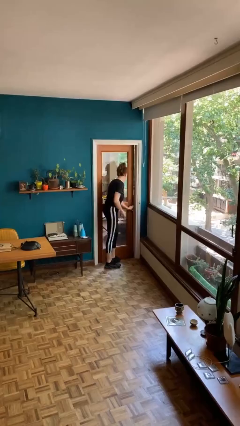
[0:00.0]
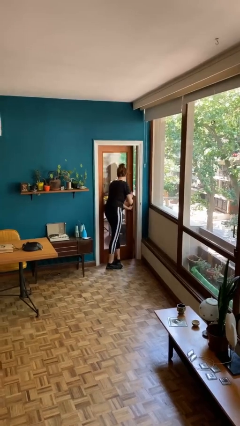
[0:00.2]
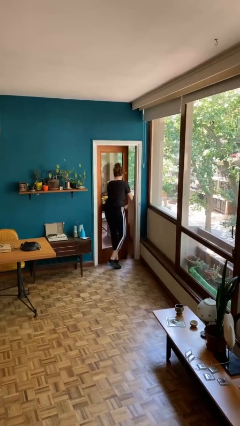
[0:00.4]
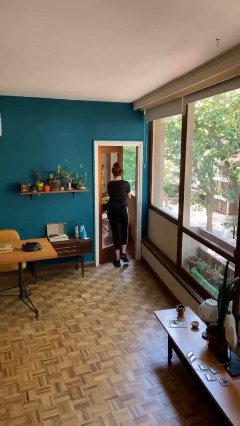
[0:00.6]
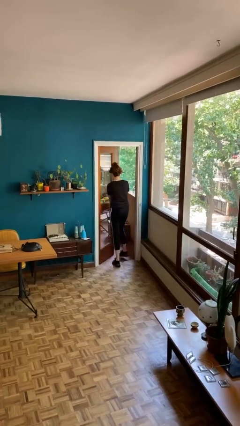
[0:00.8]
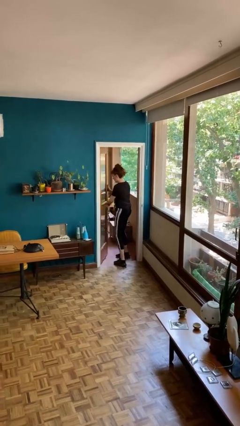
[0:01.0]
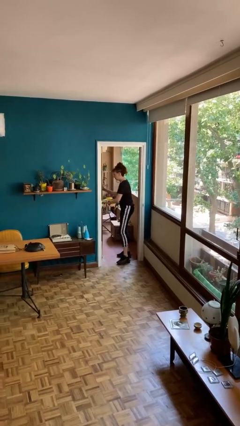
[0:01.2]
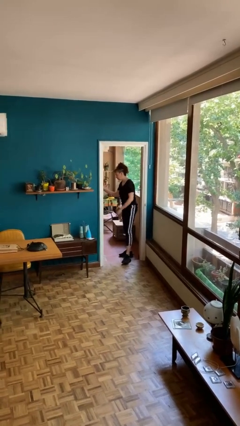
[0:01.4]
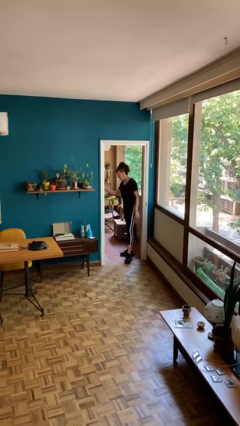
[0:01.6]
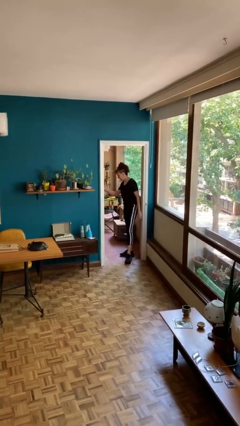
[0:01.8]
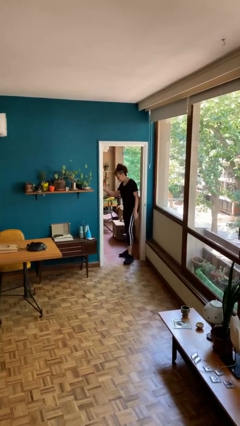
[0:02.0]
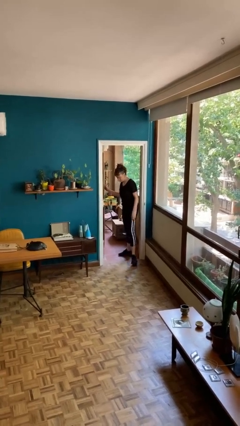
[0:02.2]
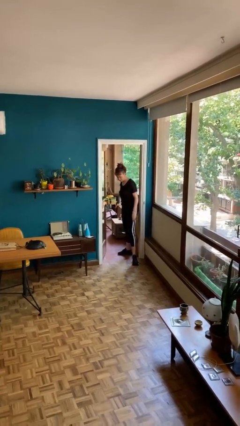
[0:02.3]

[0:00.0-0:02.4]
person opens facility door

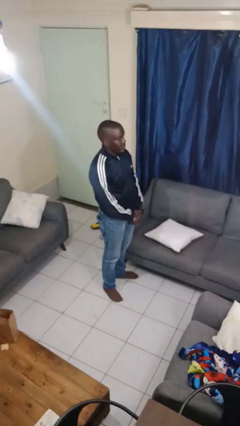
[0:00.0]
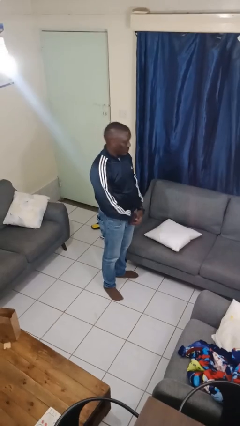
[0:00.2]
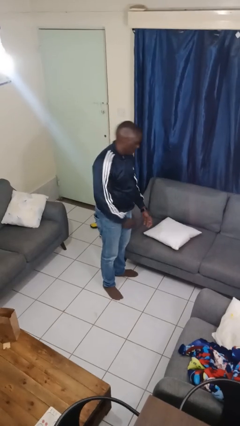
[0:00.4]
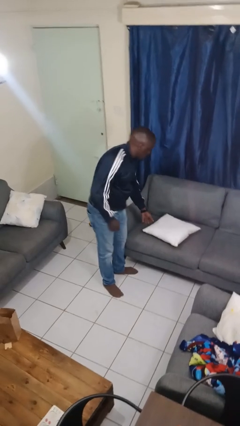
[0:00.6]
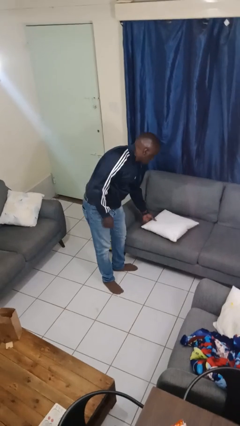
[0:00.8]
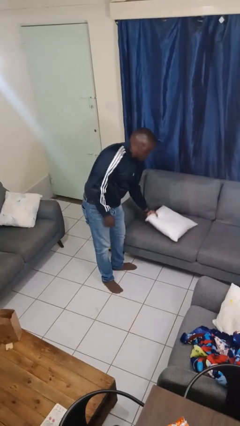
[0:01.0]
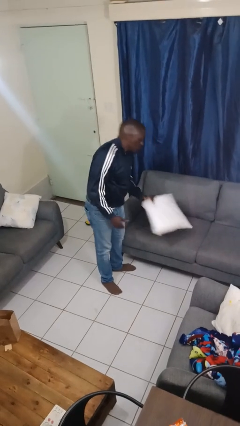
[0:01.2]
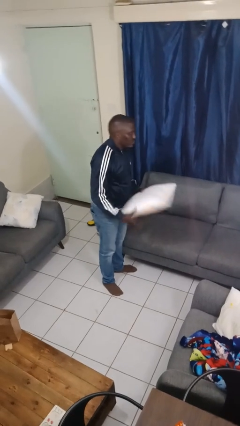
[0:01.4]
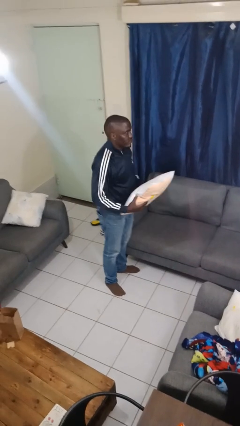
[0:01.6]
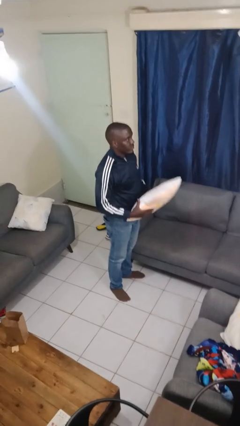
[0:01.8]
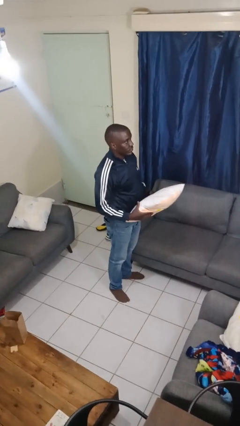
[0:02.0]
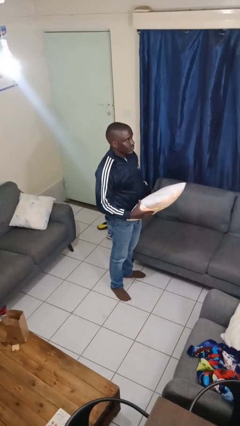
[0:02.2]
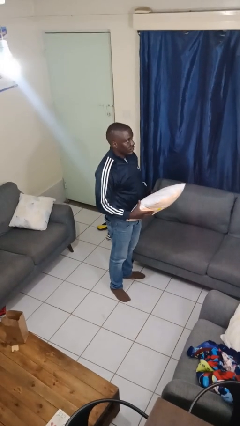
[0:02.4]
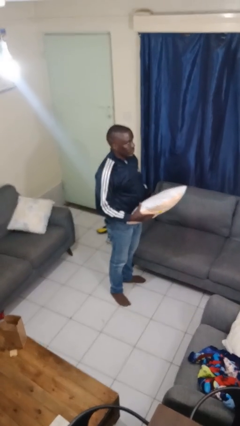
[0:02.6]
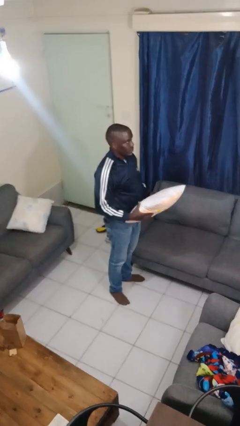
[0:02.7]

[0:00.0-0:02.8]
person picks up object from couch

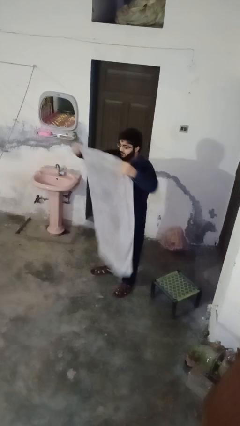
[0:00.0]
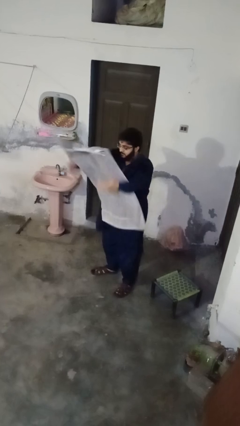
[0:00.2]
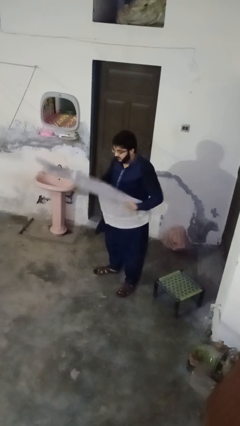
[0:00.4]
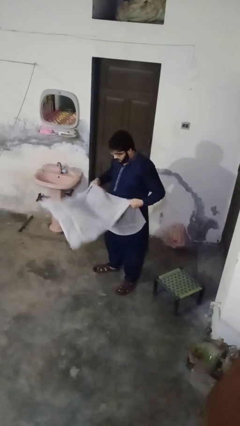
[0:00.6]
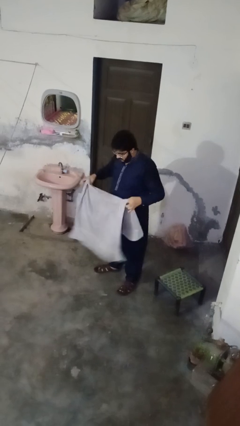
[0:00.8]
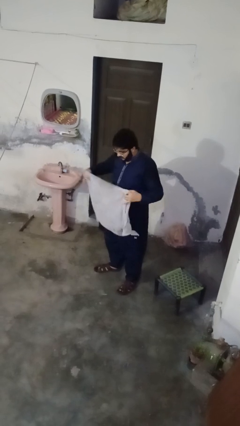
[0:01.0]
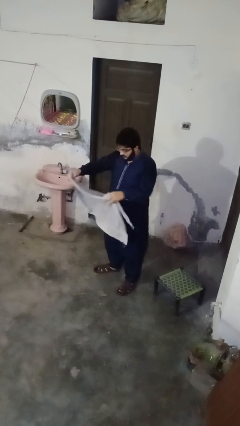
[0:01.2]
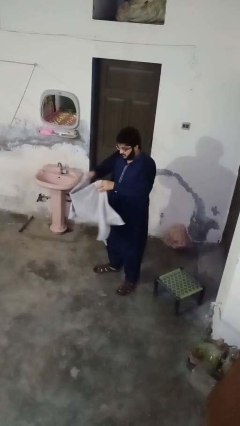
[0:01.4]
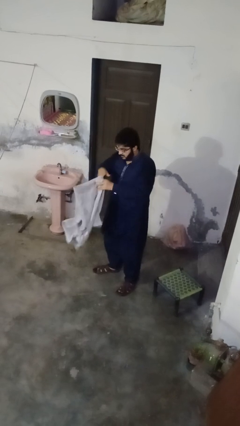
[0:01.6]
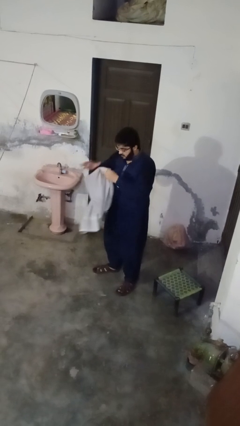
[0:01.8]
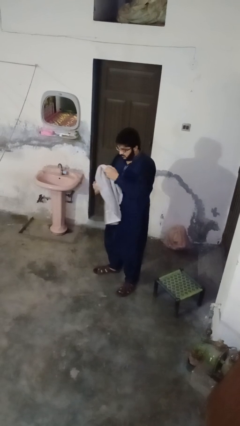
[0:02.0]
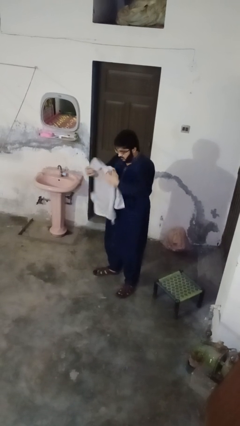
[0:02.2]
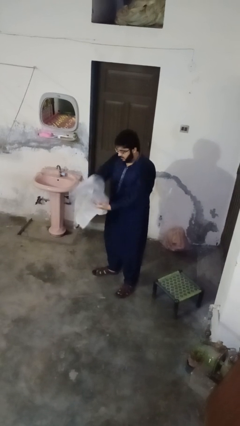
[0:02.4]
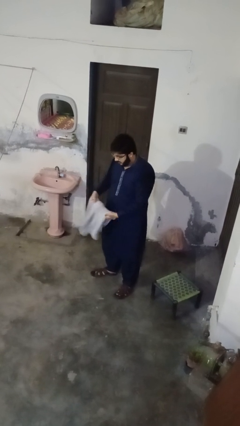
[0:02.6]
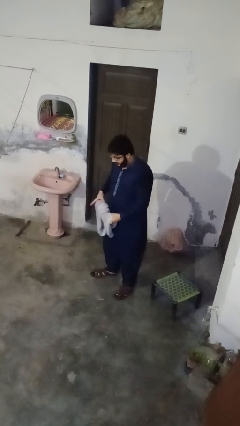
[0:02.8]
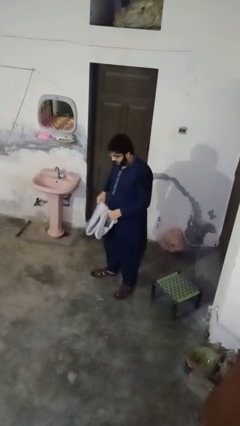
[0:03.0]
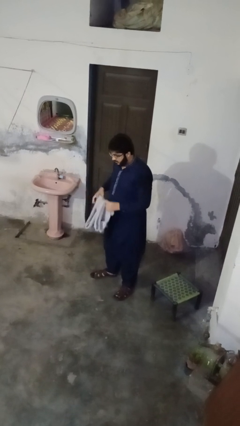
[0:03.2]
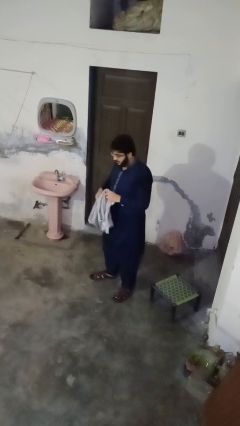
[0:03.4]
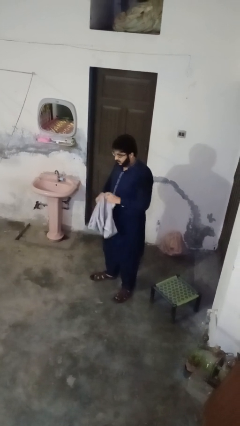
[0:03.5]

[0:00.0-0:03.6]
person folds towel

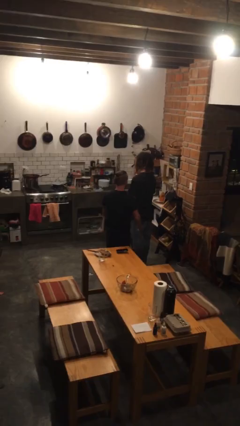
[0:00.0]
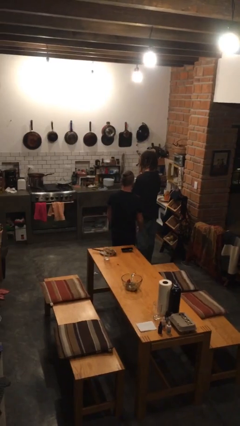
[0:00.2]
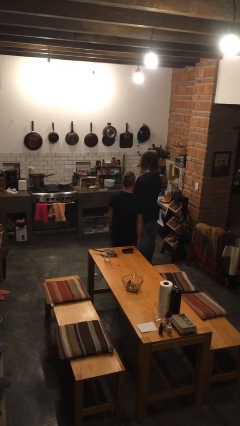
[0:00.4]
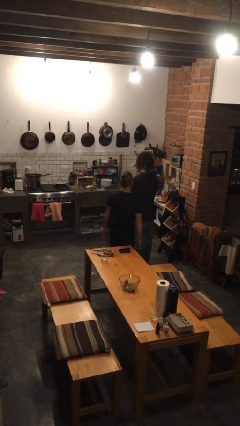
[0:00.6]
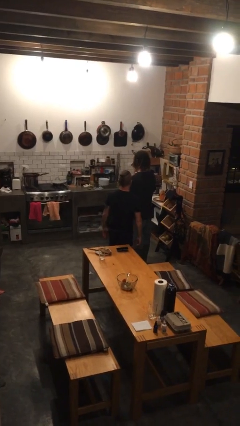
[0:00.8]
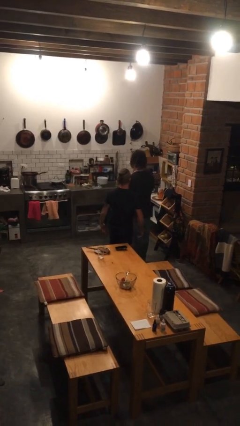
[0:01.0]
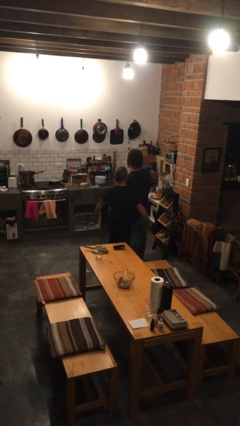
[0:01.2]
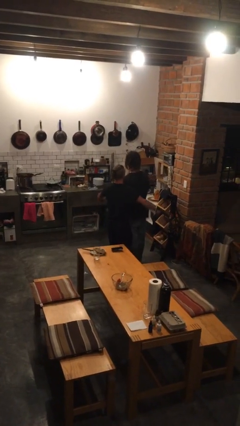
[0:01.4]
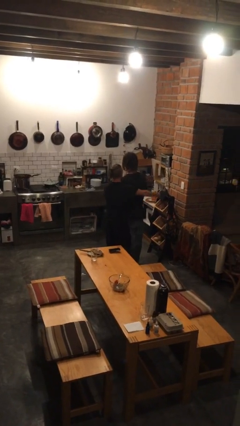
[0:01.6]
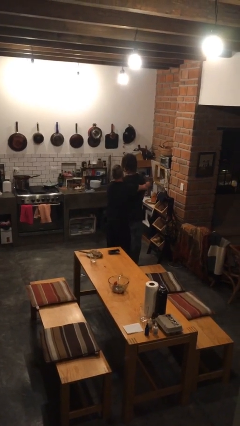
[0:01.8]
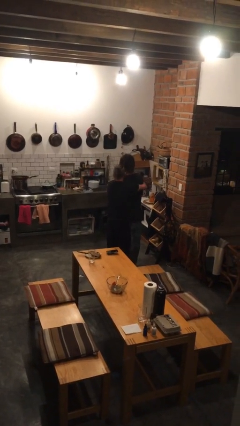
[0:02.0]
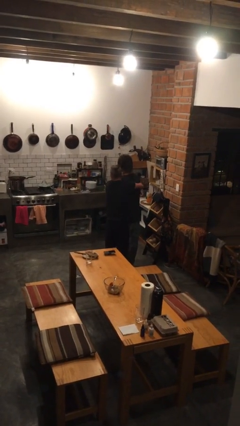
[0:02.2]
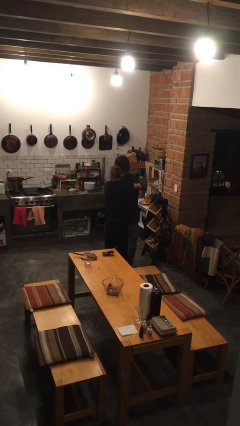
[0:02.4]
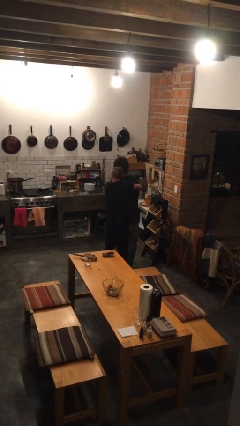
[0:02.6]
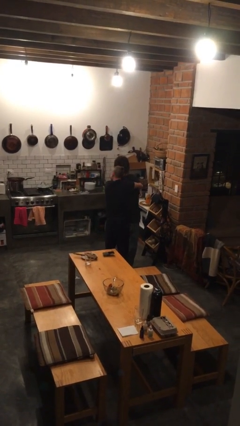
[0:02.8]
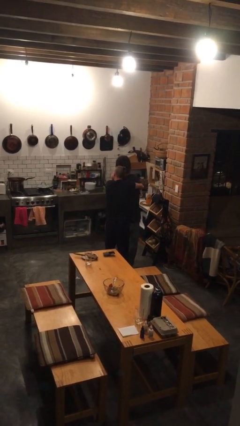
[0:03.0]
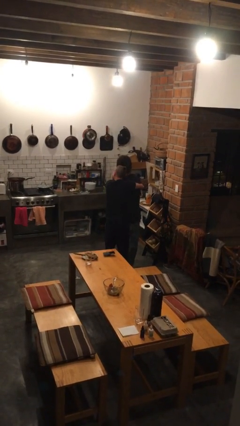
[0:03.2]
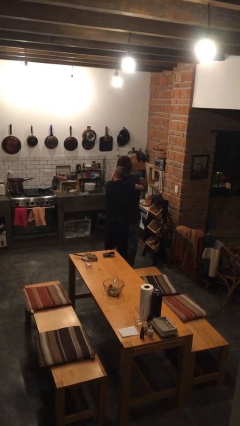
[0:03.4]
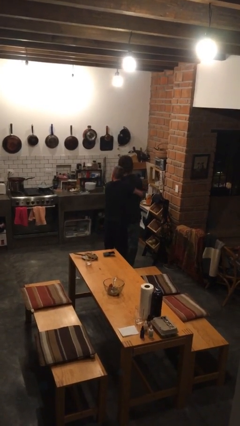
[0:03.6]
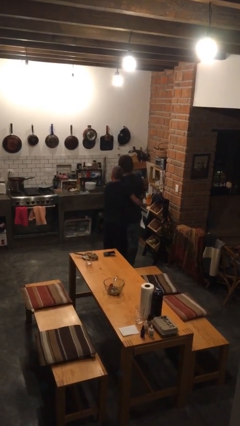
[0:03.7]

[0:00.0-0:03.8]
person hugs person from behind

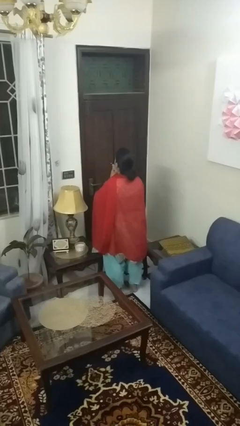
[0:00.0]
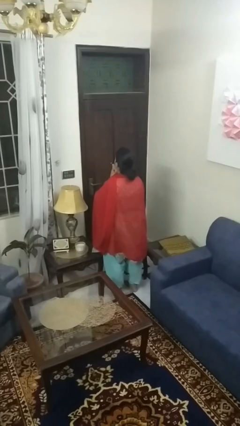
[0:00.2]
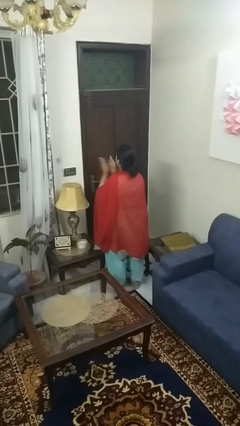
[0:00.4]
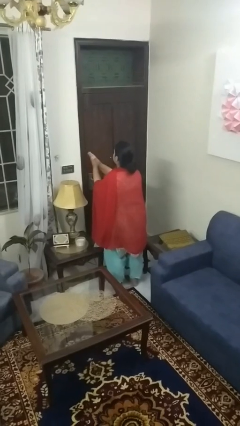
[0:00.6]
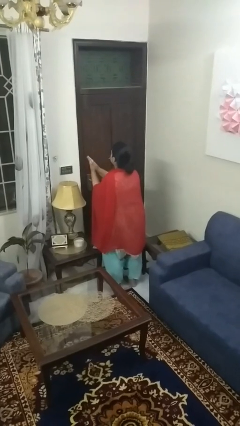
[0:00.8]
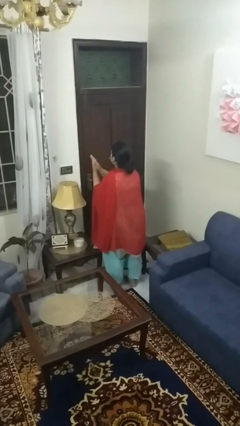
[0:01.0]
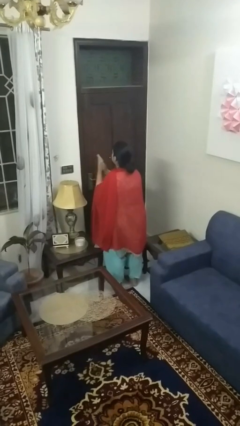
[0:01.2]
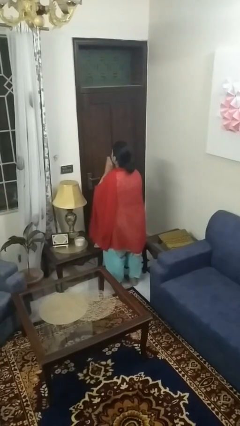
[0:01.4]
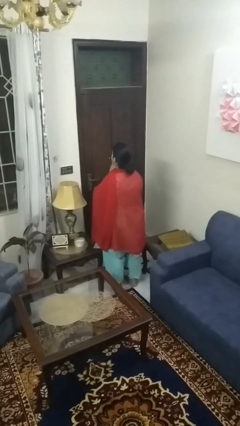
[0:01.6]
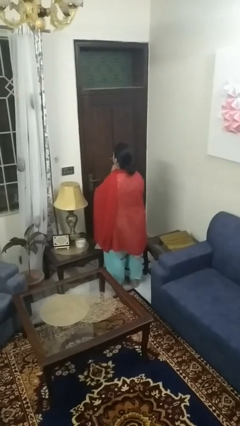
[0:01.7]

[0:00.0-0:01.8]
person swats bug

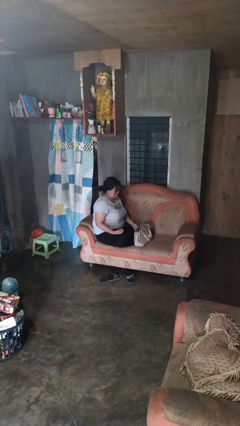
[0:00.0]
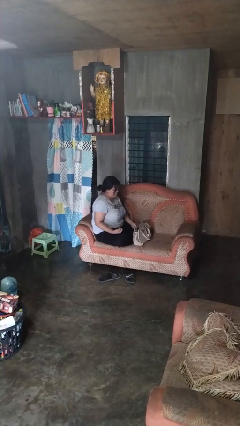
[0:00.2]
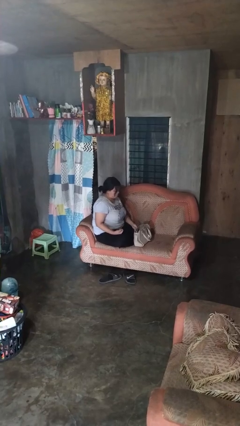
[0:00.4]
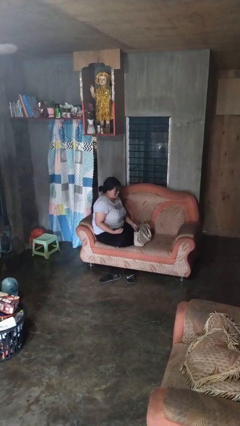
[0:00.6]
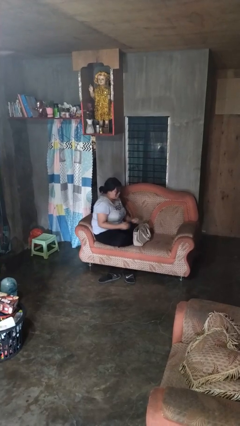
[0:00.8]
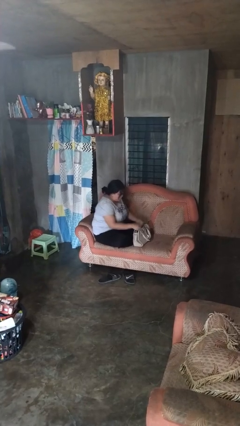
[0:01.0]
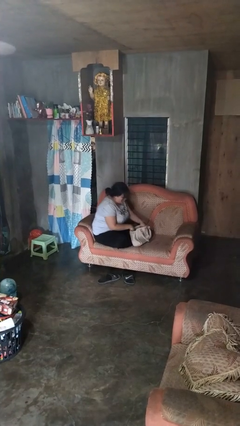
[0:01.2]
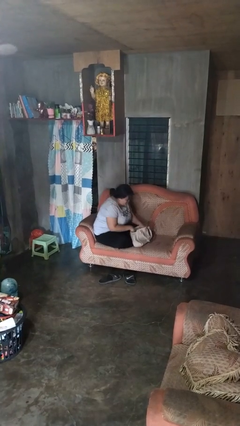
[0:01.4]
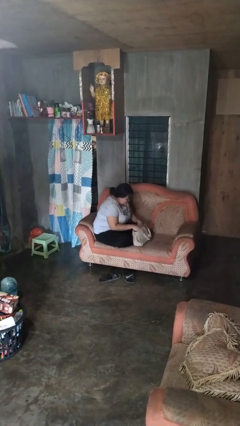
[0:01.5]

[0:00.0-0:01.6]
person searches in purse

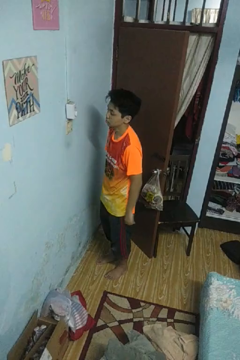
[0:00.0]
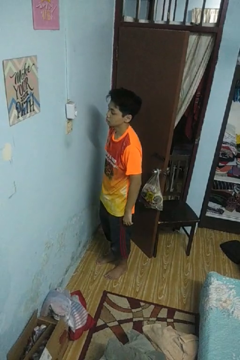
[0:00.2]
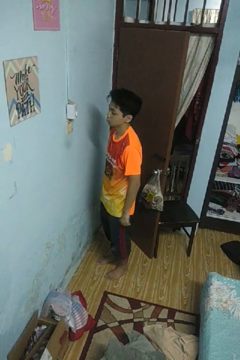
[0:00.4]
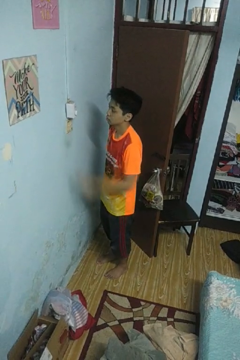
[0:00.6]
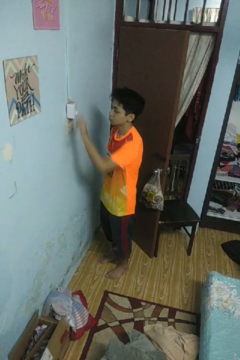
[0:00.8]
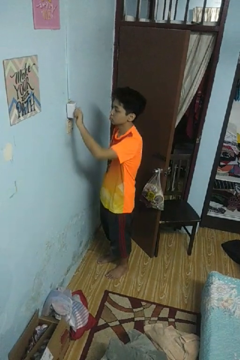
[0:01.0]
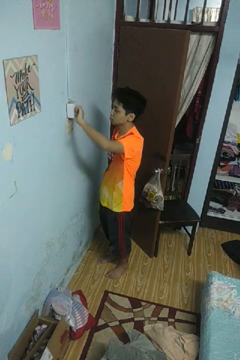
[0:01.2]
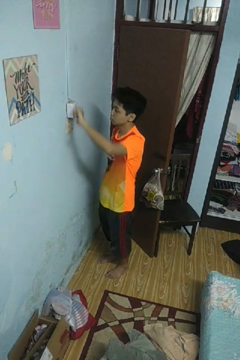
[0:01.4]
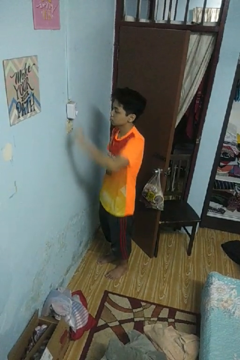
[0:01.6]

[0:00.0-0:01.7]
person adjusts thermostat
